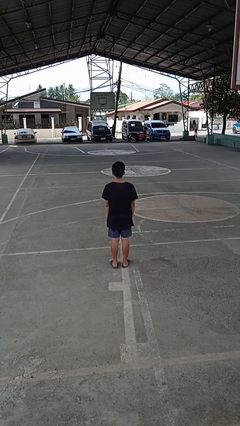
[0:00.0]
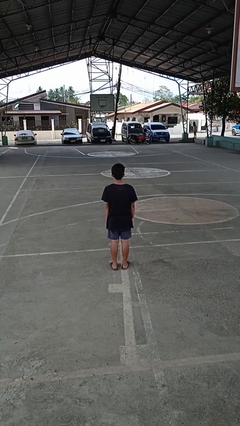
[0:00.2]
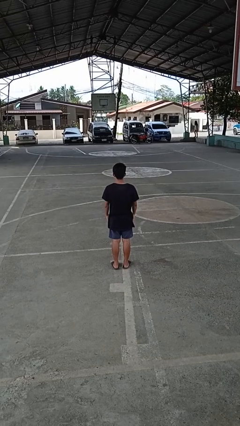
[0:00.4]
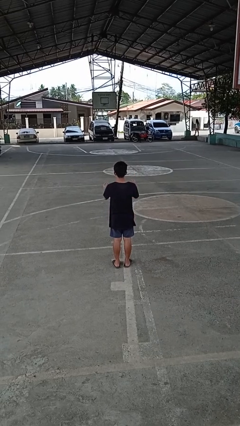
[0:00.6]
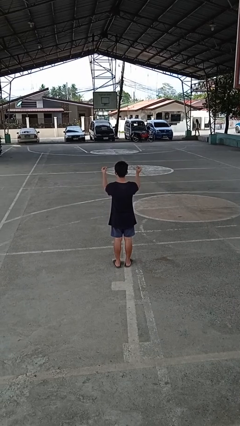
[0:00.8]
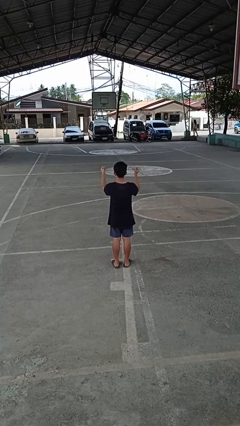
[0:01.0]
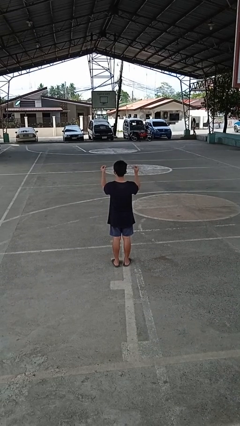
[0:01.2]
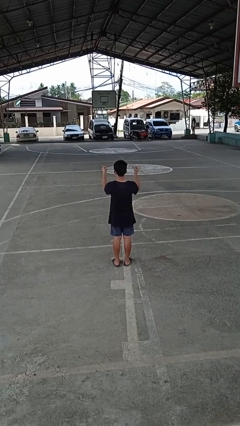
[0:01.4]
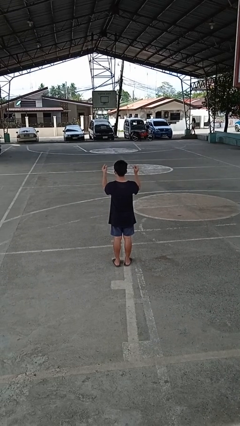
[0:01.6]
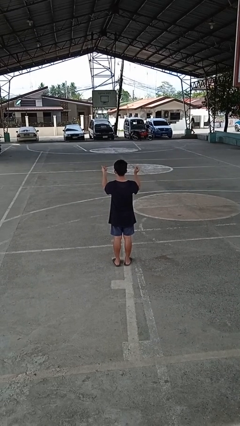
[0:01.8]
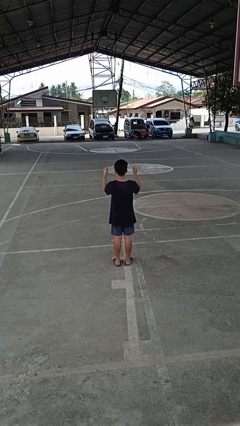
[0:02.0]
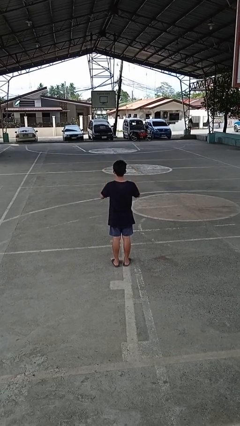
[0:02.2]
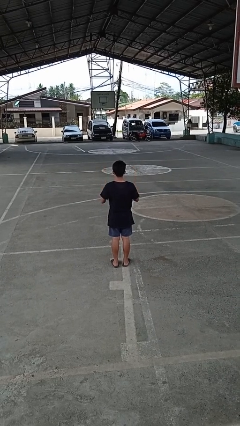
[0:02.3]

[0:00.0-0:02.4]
person snaps fingers

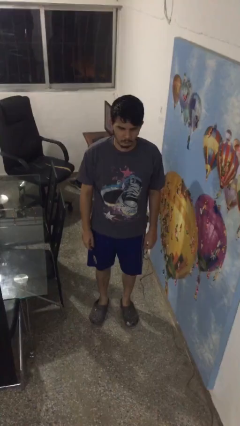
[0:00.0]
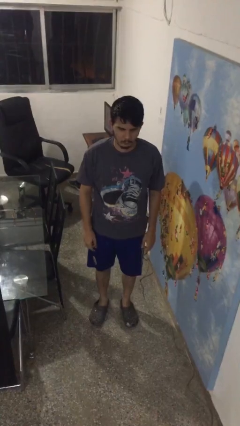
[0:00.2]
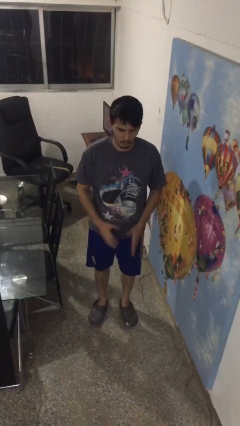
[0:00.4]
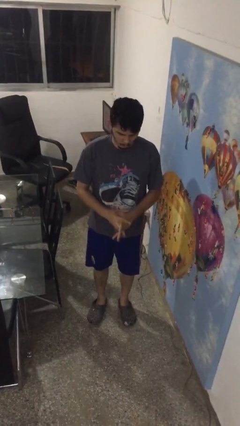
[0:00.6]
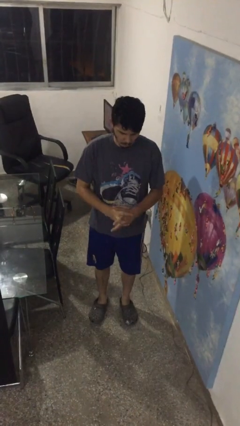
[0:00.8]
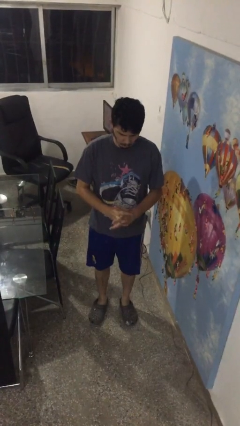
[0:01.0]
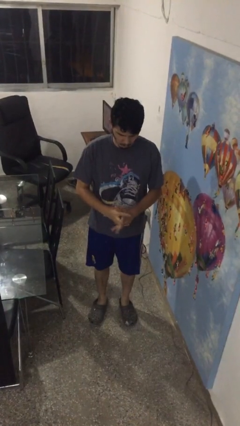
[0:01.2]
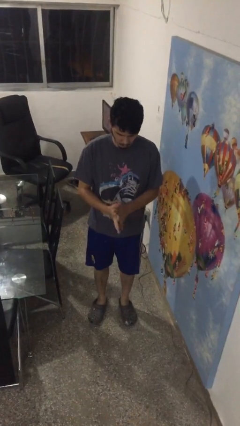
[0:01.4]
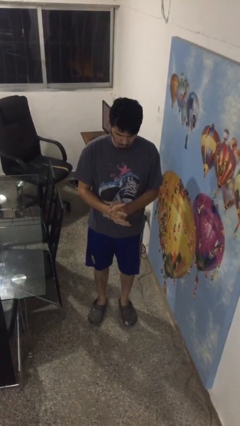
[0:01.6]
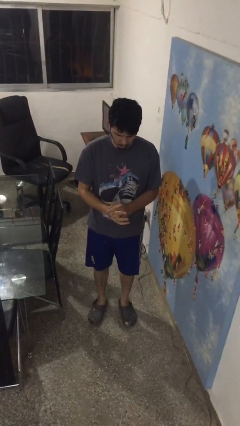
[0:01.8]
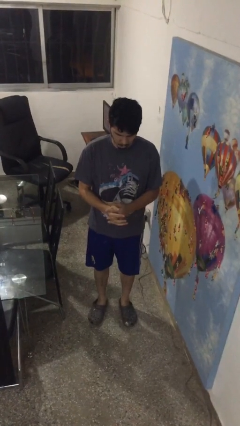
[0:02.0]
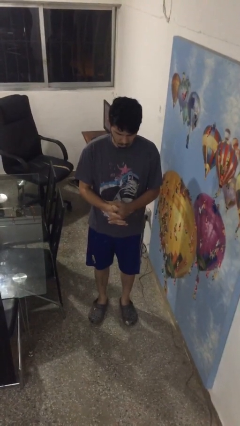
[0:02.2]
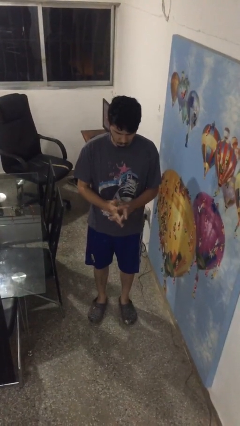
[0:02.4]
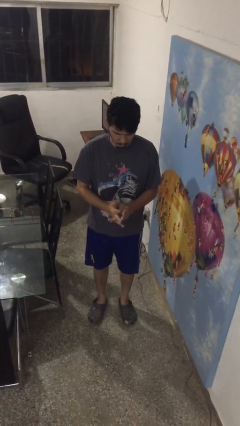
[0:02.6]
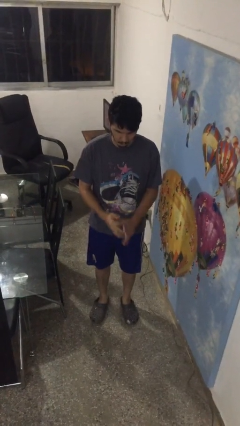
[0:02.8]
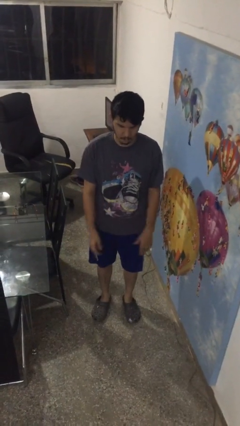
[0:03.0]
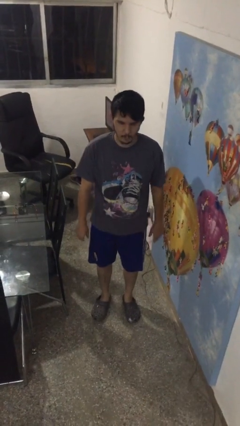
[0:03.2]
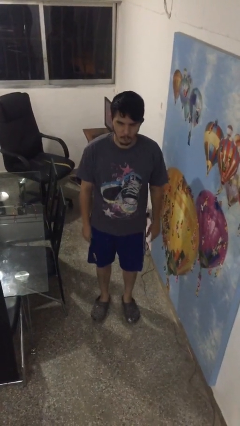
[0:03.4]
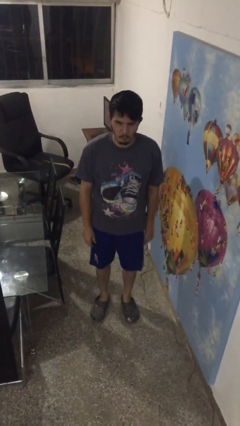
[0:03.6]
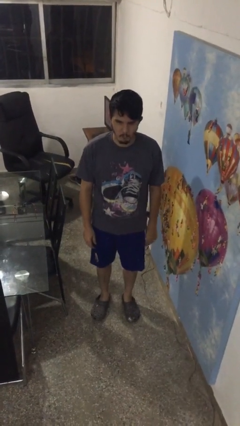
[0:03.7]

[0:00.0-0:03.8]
person cracks knuckles

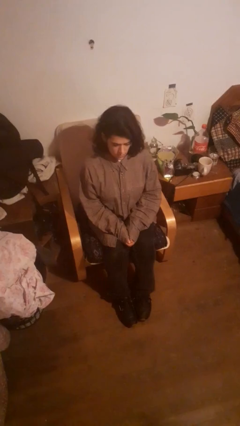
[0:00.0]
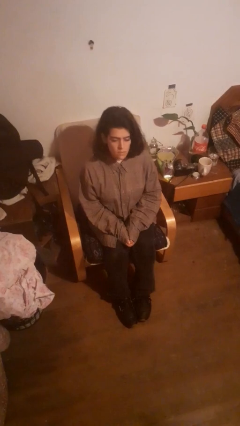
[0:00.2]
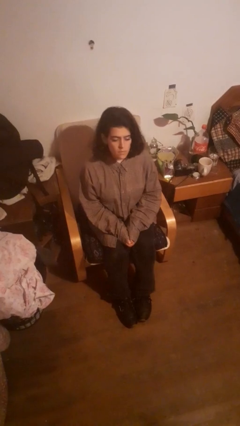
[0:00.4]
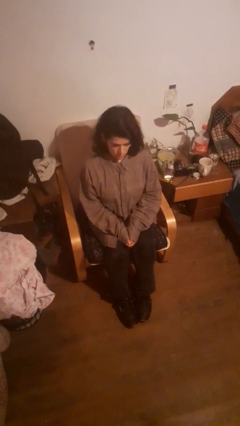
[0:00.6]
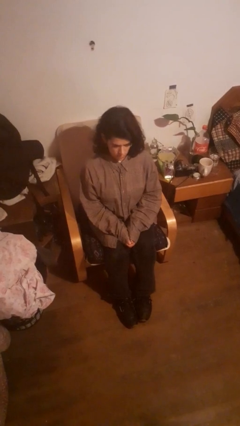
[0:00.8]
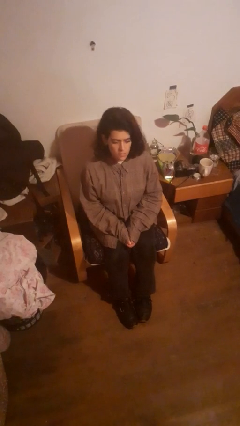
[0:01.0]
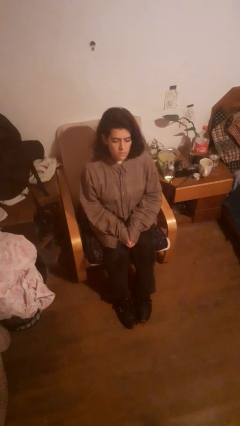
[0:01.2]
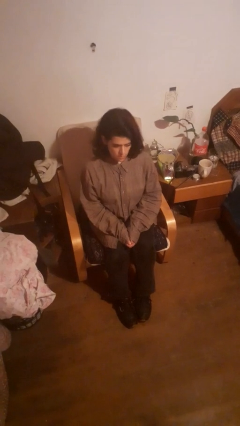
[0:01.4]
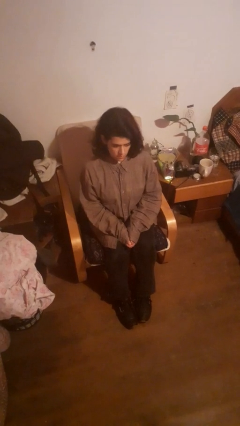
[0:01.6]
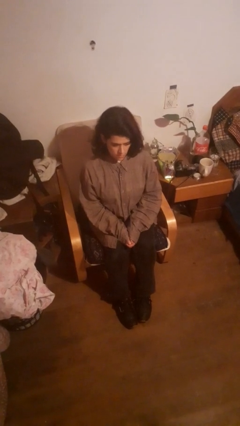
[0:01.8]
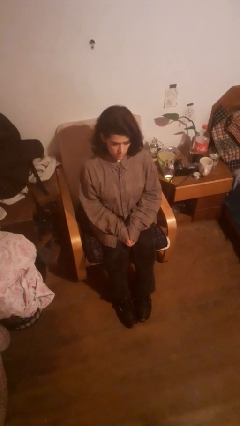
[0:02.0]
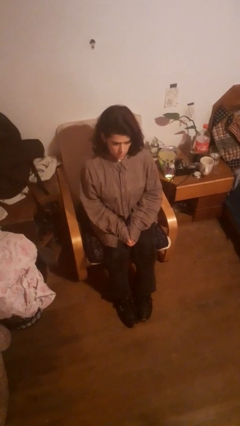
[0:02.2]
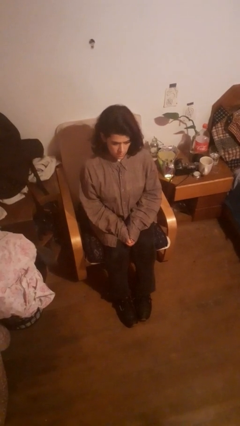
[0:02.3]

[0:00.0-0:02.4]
person nods head

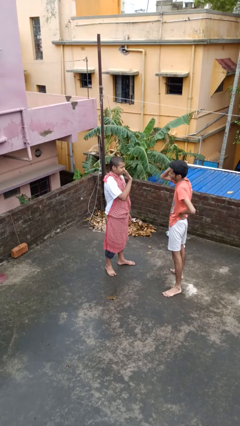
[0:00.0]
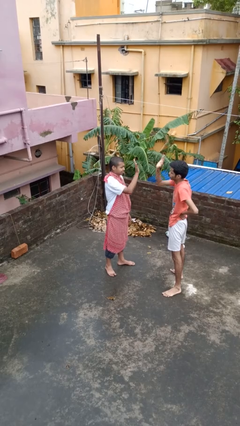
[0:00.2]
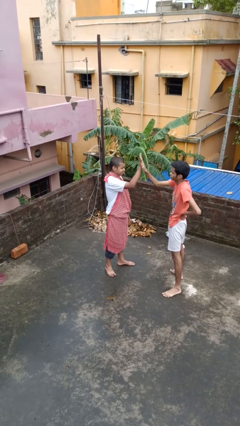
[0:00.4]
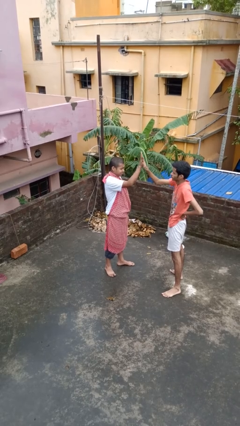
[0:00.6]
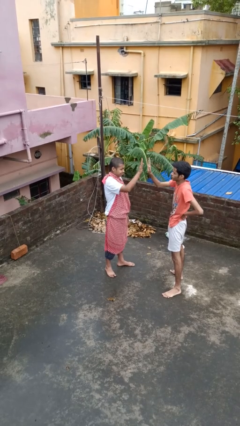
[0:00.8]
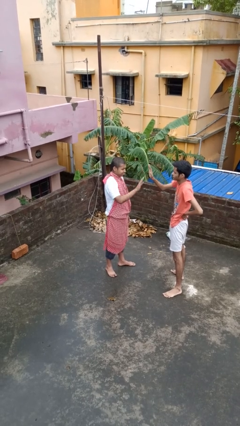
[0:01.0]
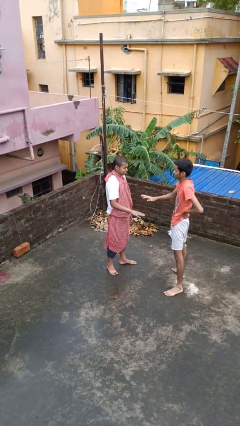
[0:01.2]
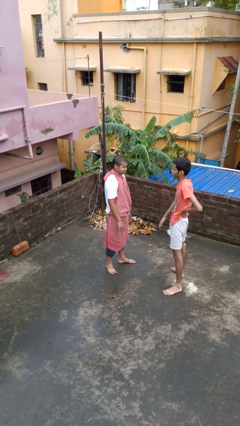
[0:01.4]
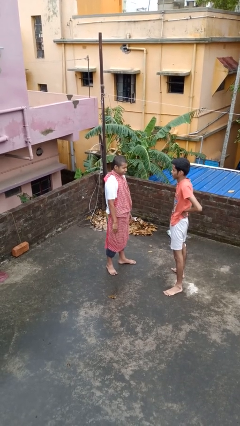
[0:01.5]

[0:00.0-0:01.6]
person highfives hand

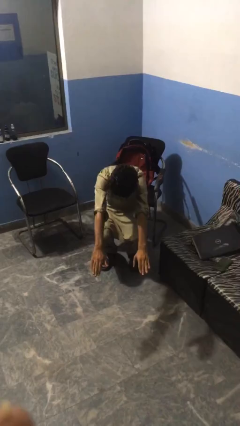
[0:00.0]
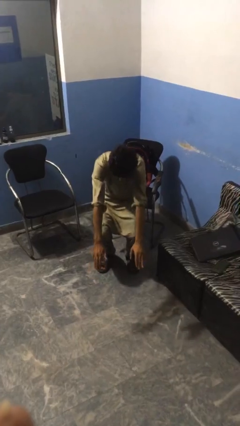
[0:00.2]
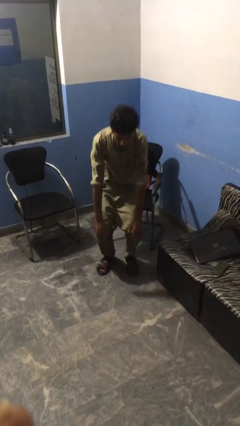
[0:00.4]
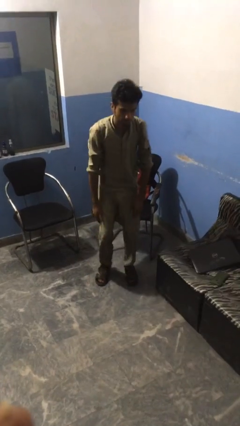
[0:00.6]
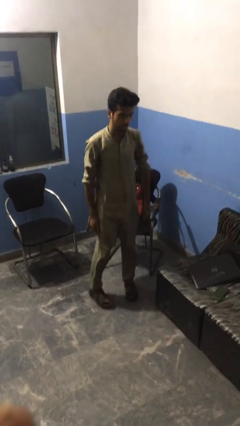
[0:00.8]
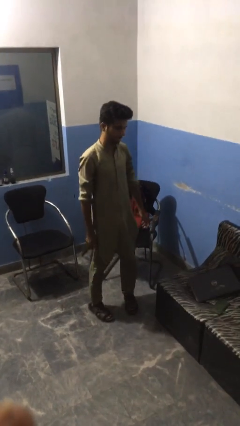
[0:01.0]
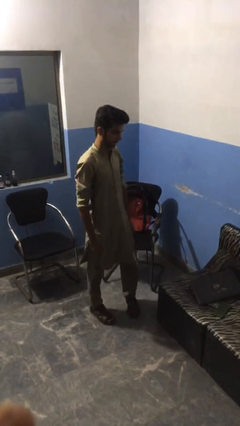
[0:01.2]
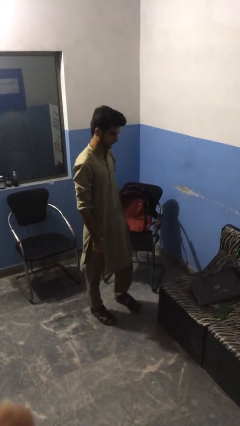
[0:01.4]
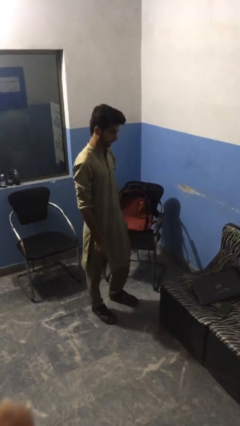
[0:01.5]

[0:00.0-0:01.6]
person stands up

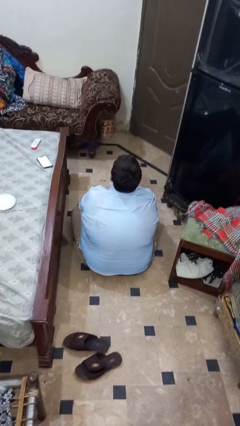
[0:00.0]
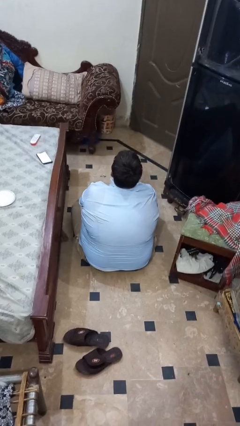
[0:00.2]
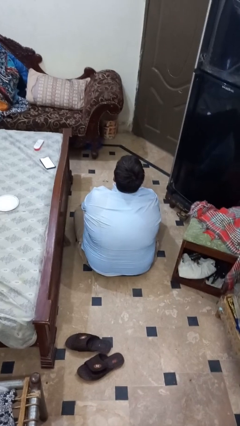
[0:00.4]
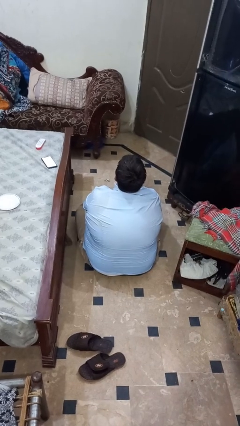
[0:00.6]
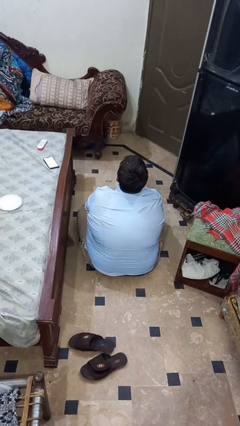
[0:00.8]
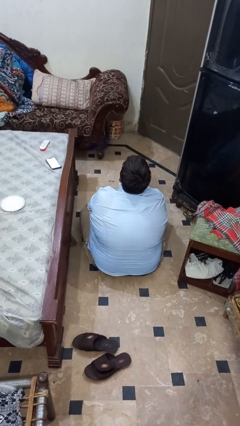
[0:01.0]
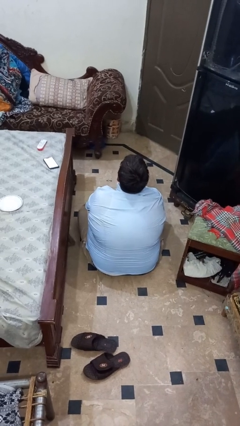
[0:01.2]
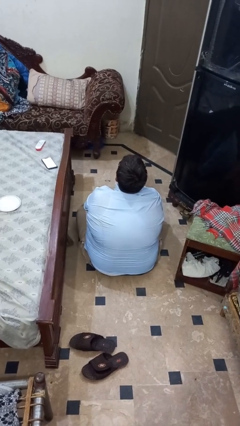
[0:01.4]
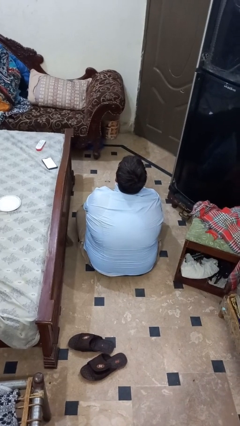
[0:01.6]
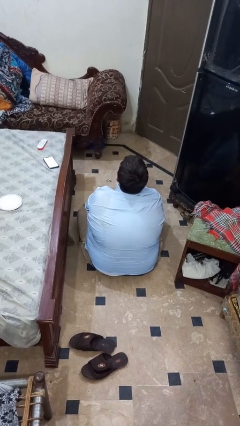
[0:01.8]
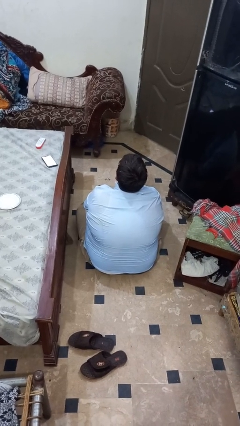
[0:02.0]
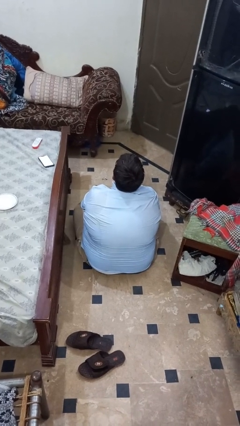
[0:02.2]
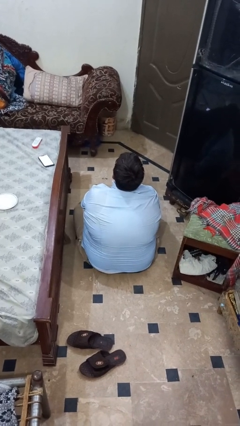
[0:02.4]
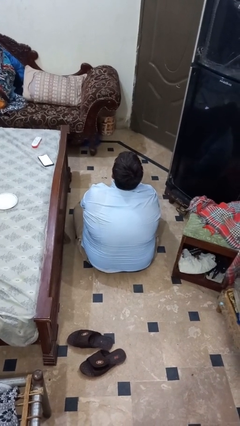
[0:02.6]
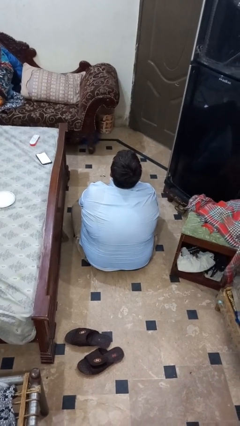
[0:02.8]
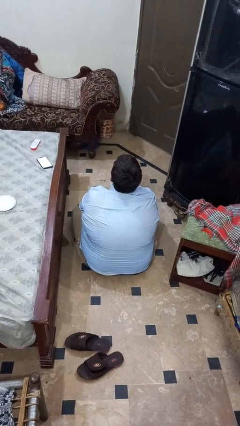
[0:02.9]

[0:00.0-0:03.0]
person sticks out tongue

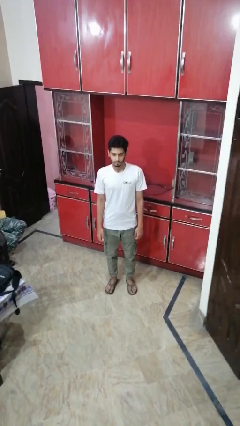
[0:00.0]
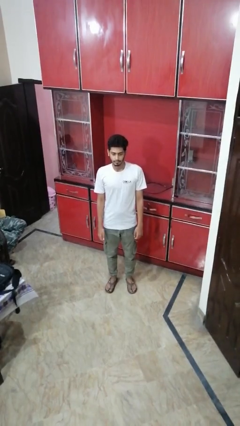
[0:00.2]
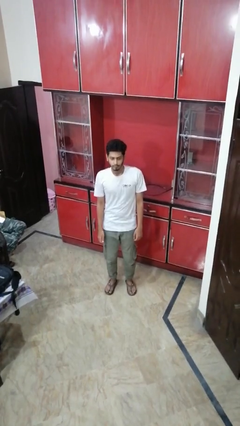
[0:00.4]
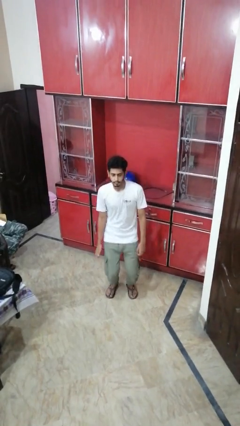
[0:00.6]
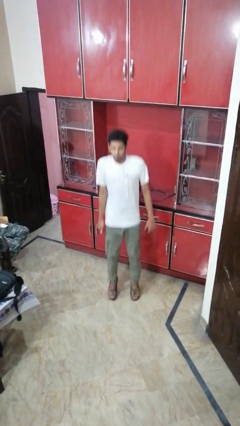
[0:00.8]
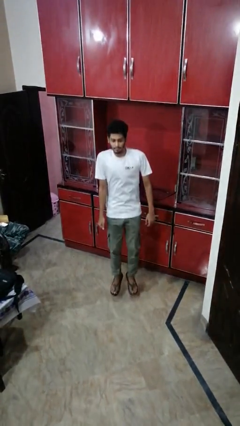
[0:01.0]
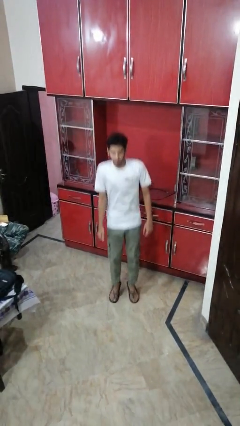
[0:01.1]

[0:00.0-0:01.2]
person jumps

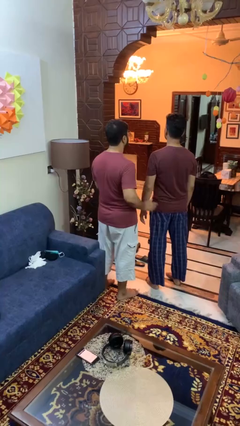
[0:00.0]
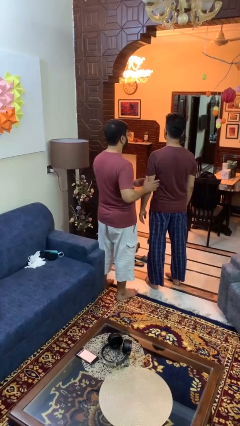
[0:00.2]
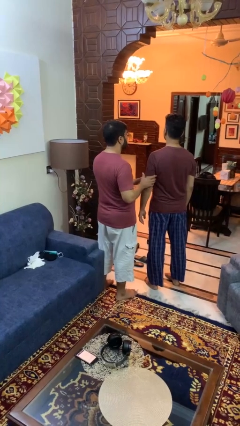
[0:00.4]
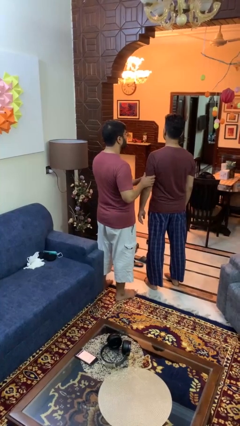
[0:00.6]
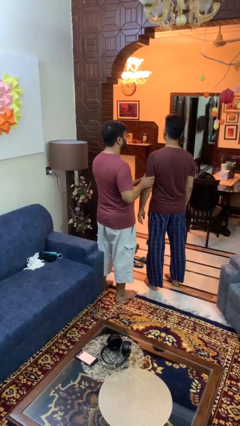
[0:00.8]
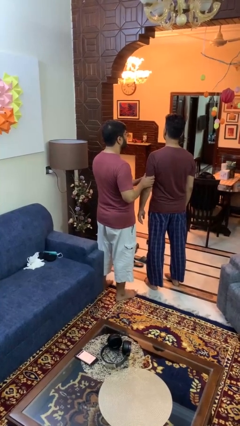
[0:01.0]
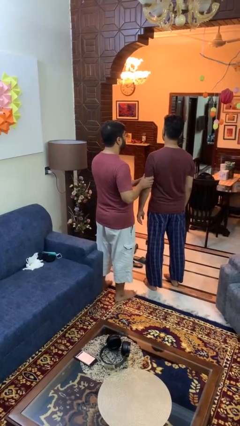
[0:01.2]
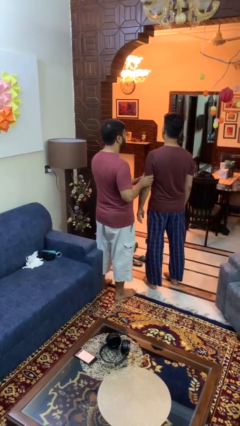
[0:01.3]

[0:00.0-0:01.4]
person grabs person by bicep
